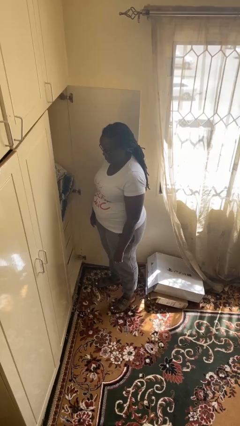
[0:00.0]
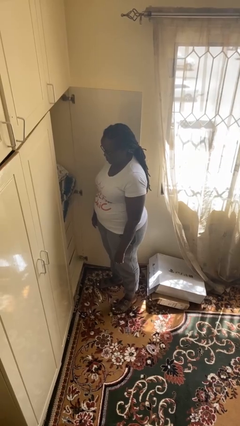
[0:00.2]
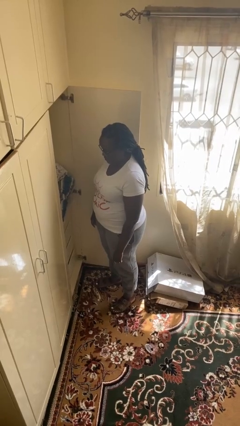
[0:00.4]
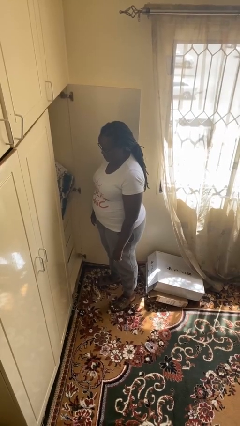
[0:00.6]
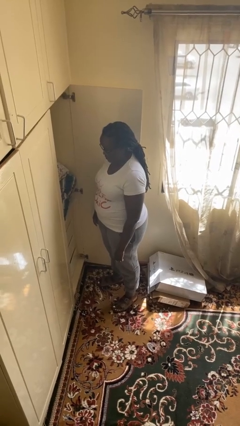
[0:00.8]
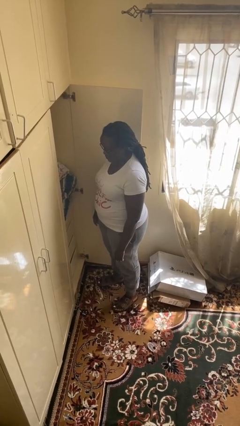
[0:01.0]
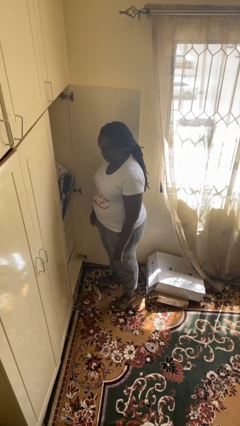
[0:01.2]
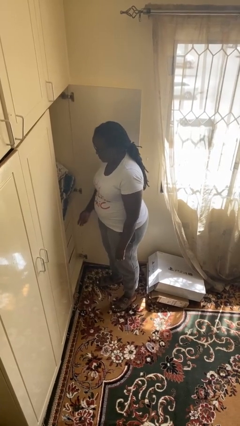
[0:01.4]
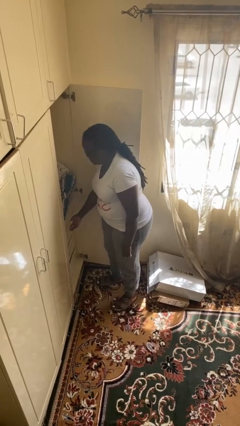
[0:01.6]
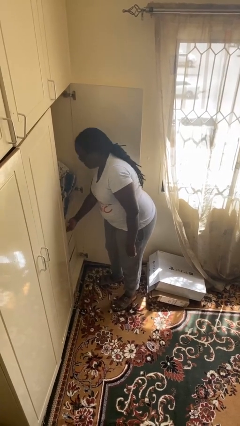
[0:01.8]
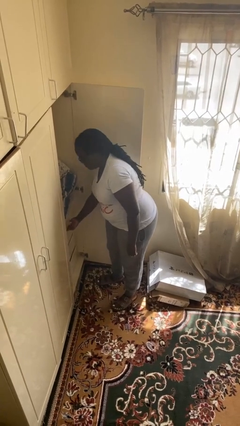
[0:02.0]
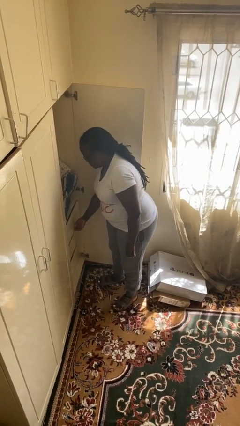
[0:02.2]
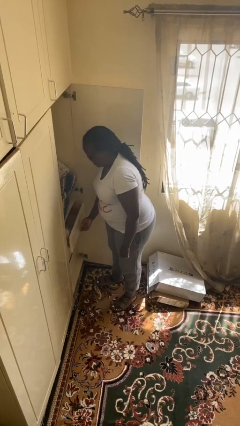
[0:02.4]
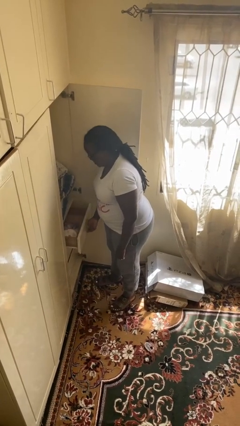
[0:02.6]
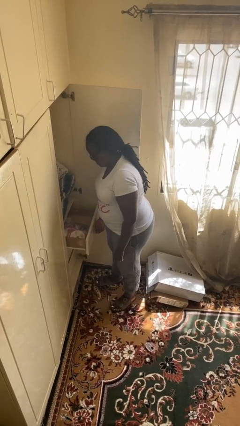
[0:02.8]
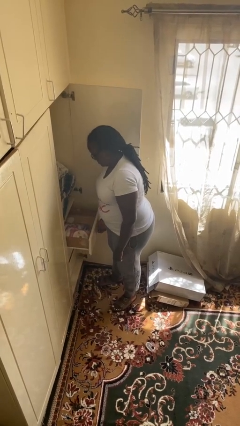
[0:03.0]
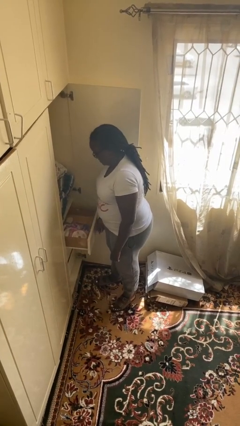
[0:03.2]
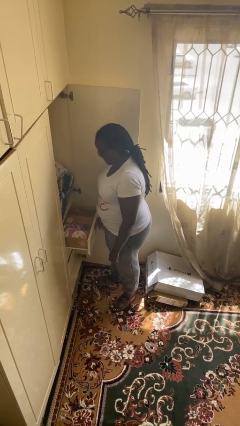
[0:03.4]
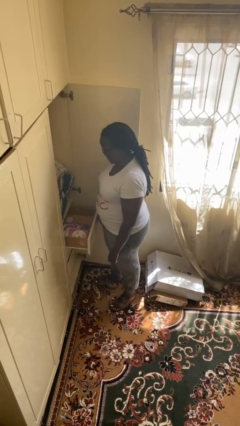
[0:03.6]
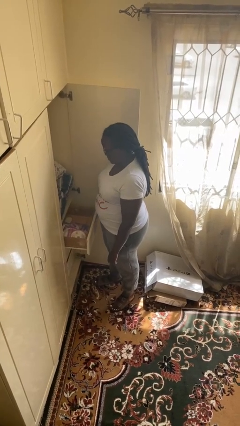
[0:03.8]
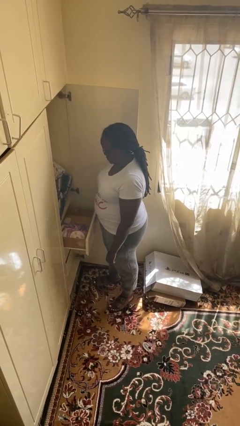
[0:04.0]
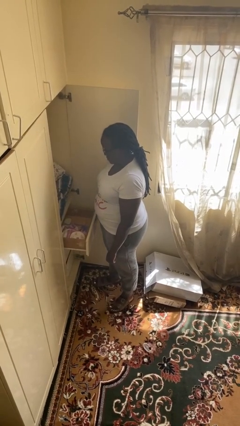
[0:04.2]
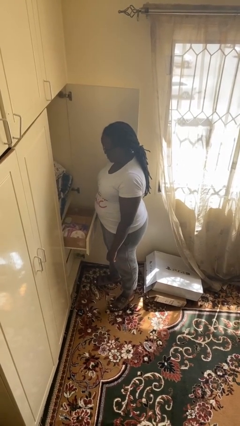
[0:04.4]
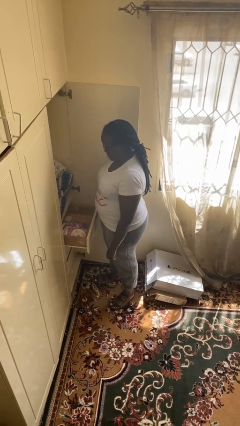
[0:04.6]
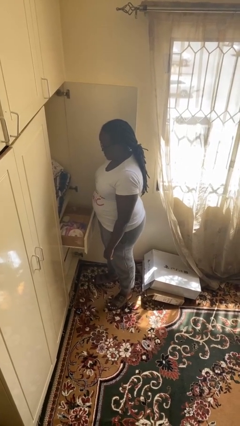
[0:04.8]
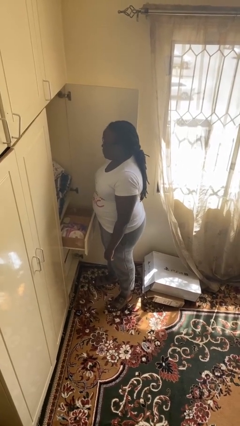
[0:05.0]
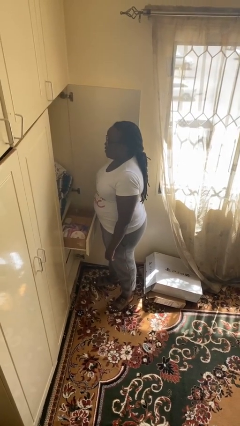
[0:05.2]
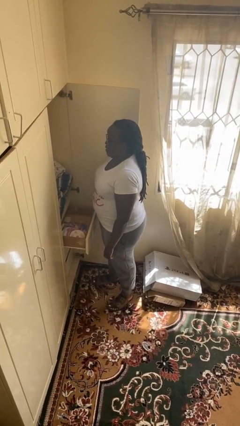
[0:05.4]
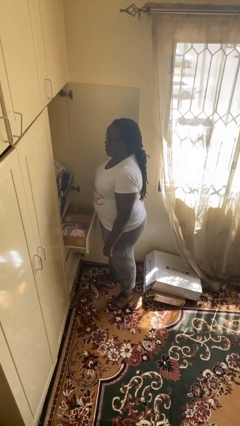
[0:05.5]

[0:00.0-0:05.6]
person opens dresser drawer

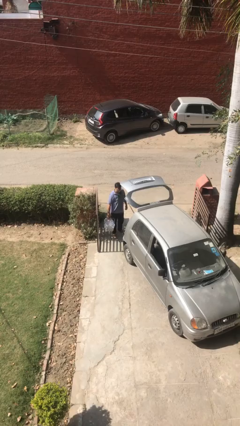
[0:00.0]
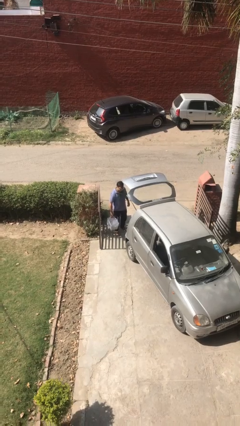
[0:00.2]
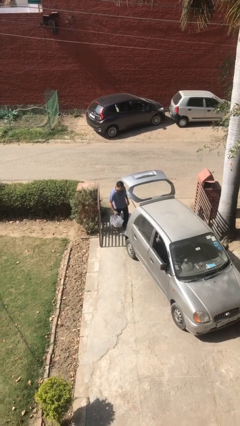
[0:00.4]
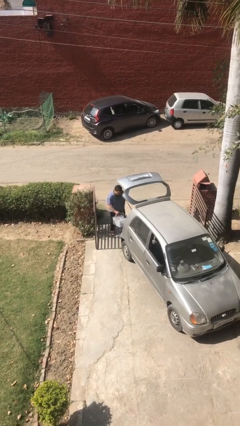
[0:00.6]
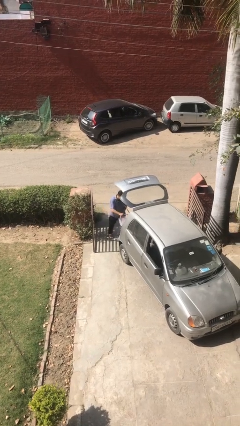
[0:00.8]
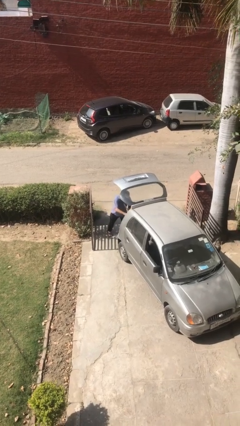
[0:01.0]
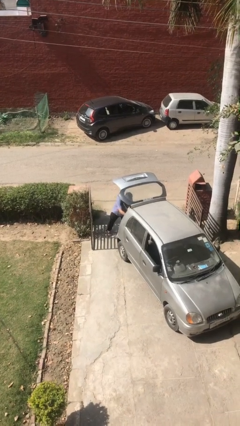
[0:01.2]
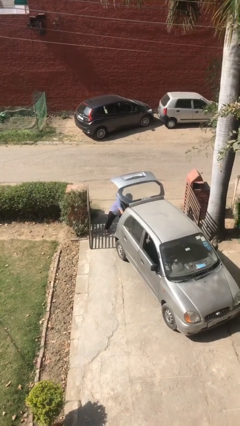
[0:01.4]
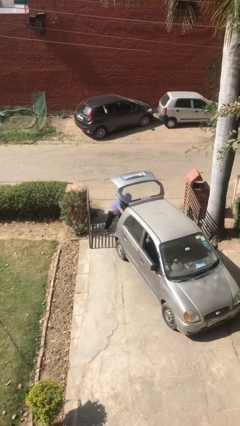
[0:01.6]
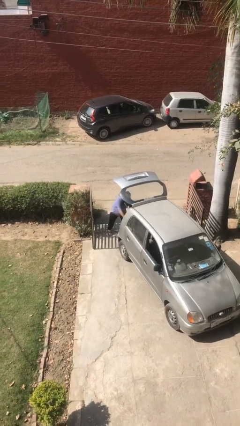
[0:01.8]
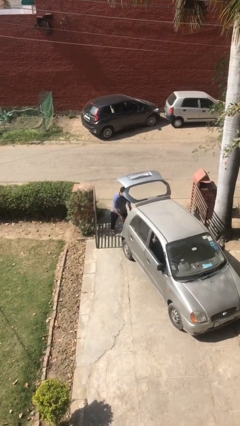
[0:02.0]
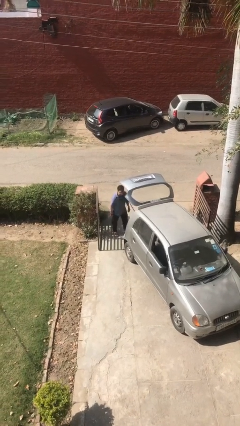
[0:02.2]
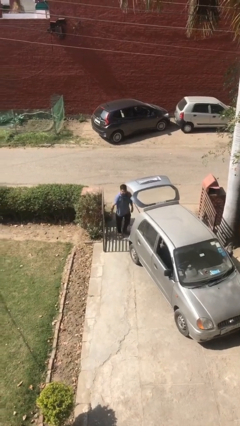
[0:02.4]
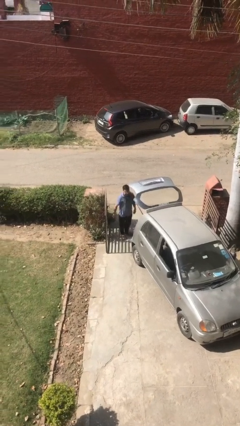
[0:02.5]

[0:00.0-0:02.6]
person loads car

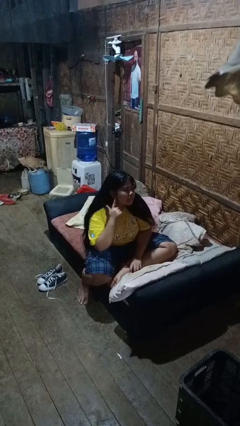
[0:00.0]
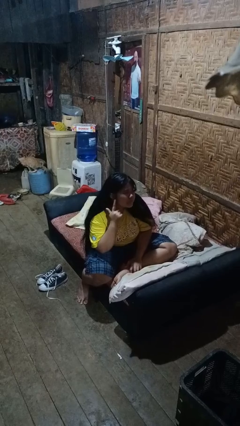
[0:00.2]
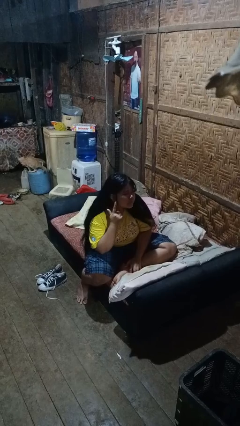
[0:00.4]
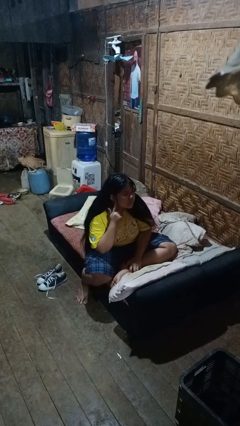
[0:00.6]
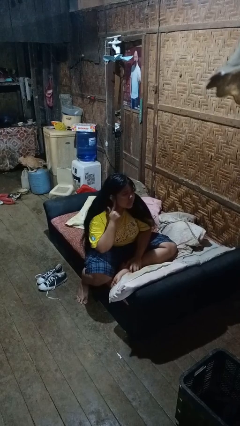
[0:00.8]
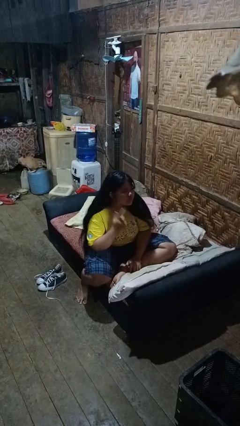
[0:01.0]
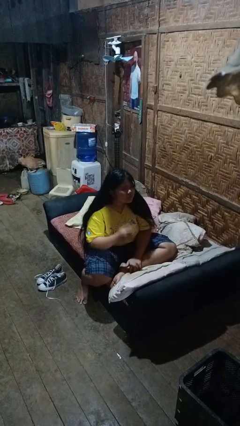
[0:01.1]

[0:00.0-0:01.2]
person gestures listen closely

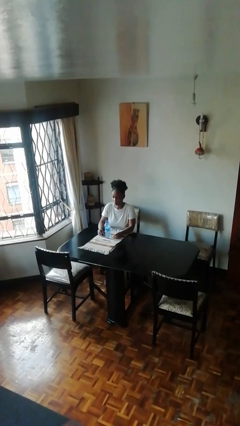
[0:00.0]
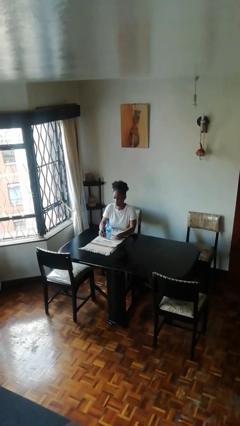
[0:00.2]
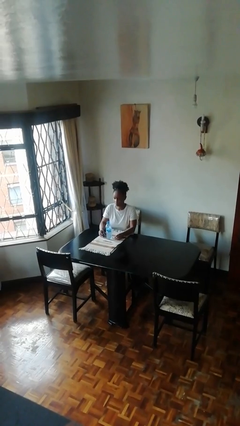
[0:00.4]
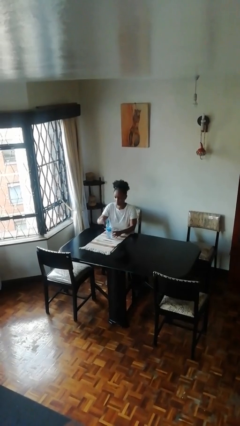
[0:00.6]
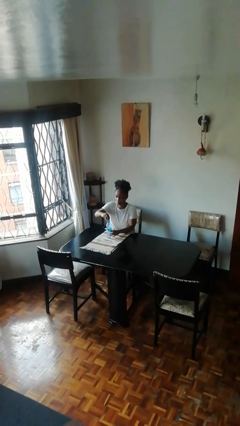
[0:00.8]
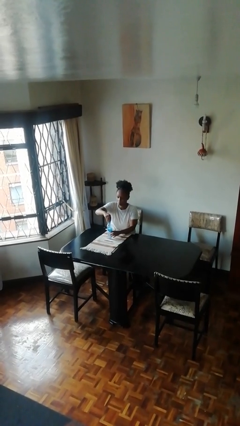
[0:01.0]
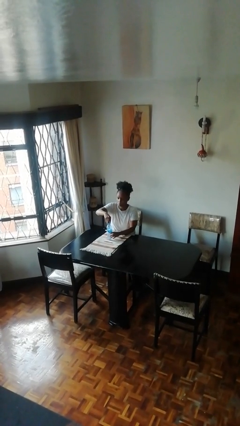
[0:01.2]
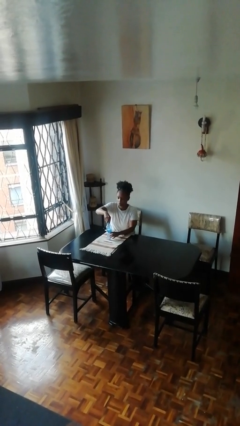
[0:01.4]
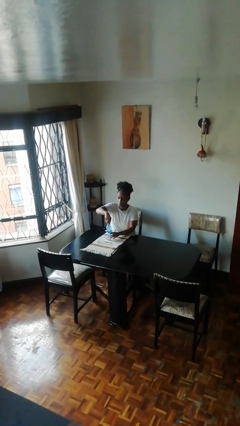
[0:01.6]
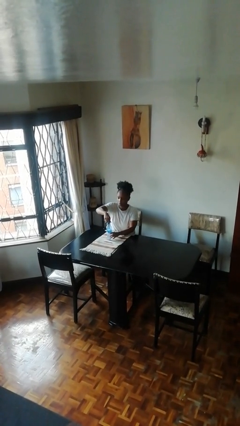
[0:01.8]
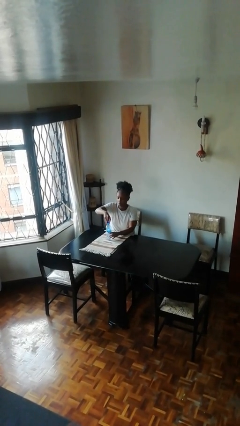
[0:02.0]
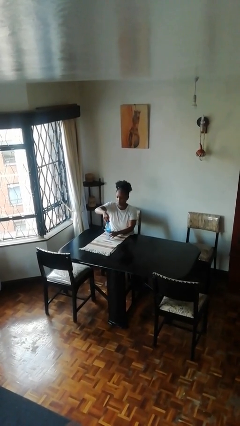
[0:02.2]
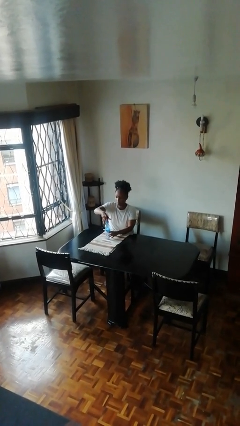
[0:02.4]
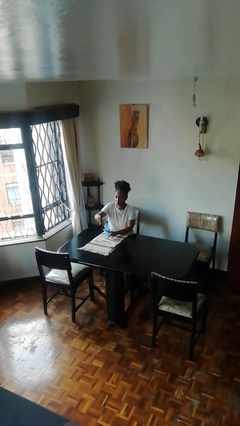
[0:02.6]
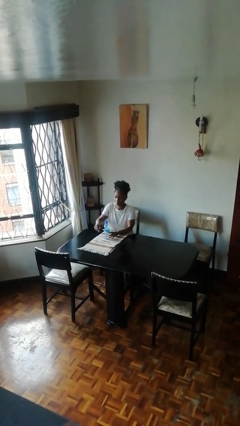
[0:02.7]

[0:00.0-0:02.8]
person screws lid to bottle

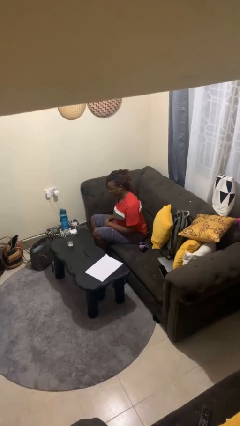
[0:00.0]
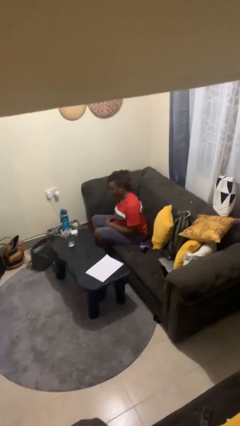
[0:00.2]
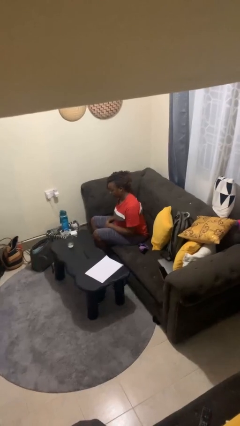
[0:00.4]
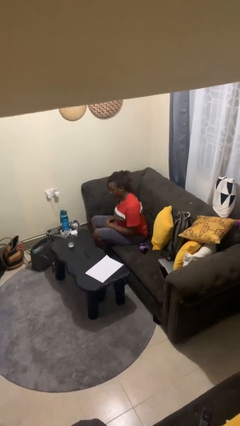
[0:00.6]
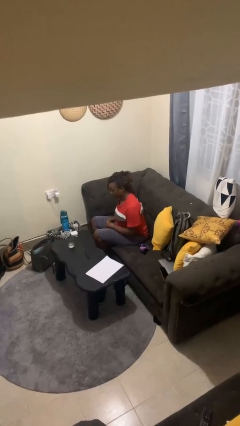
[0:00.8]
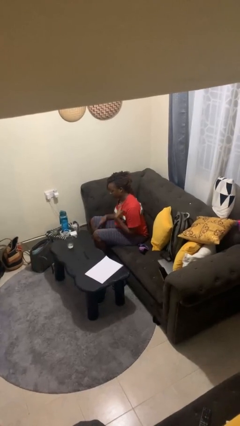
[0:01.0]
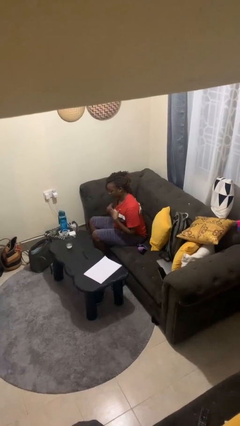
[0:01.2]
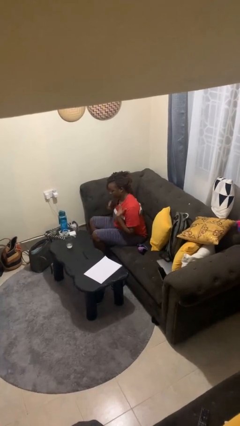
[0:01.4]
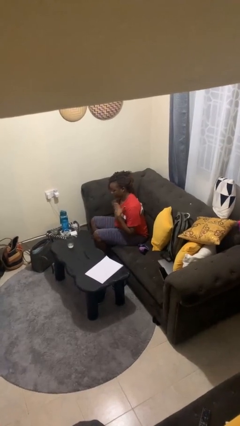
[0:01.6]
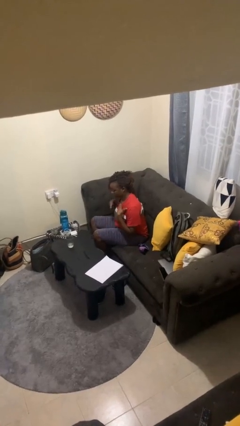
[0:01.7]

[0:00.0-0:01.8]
person drums on chest

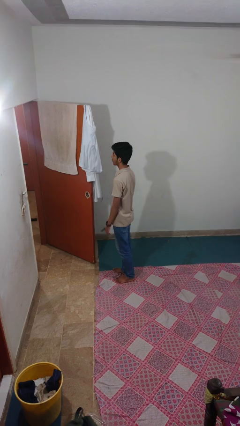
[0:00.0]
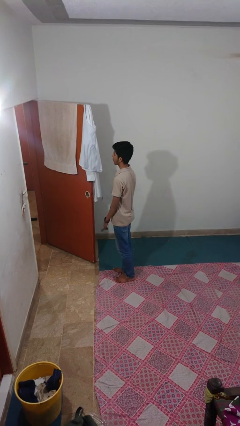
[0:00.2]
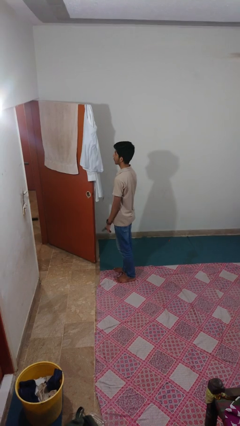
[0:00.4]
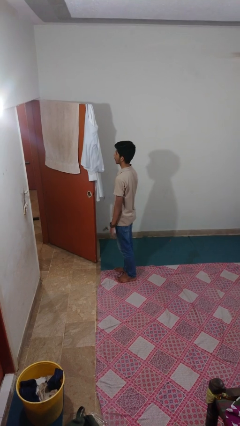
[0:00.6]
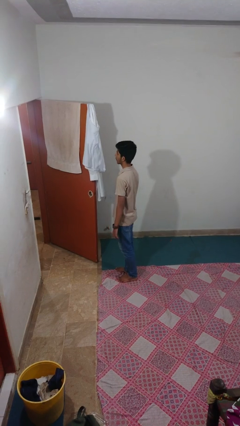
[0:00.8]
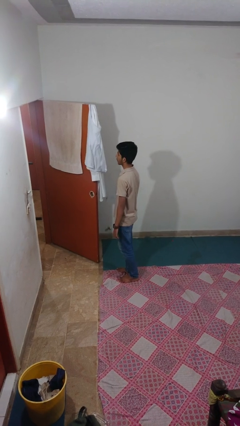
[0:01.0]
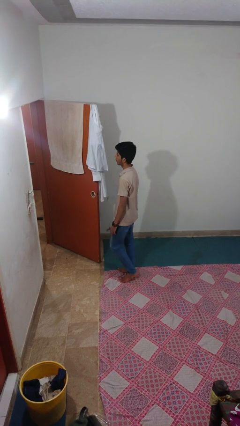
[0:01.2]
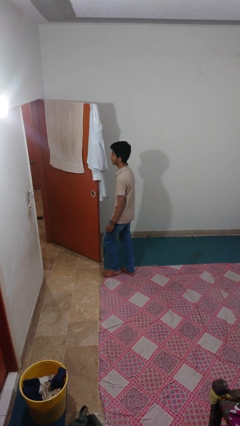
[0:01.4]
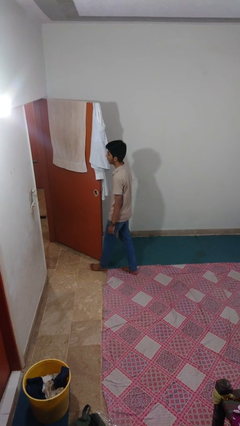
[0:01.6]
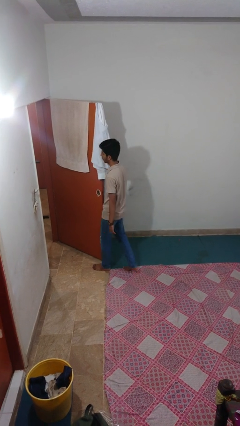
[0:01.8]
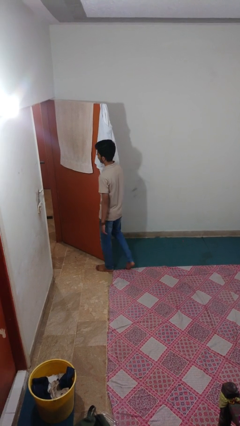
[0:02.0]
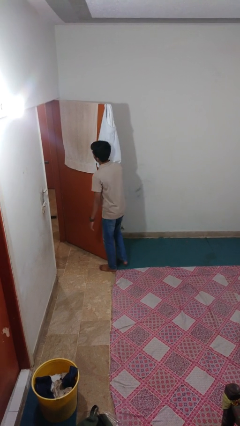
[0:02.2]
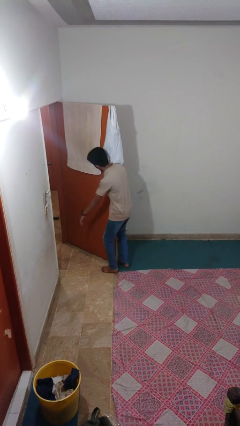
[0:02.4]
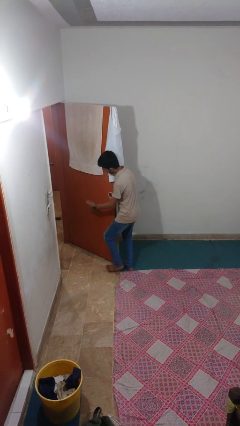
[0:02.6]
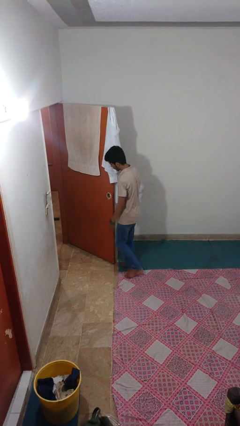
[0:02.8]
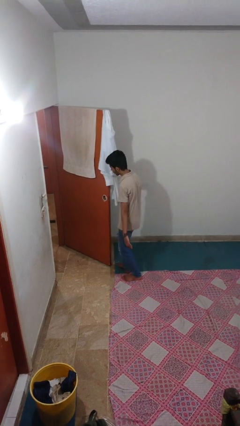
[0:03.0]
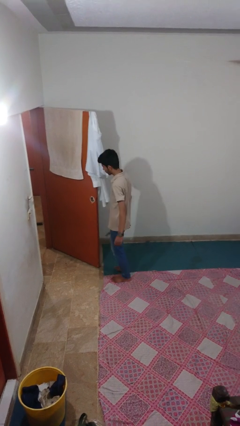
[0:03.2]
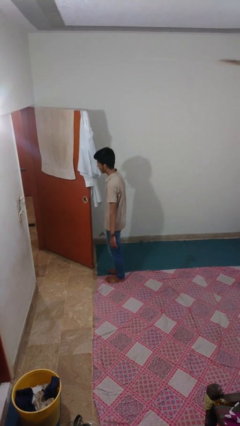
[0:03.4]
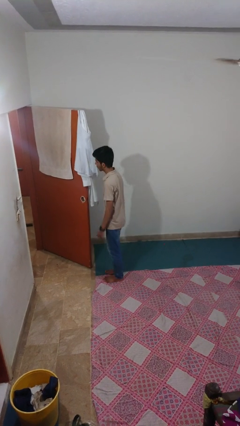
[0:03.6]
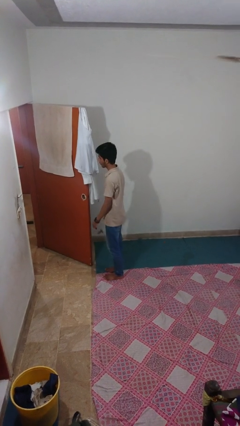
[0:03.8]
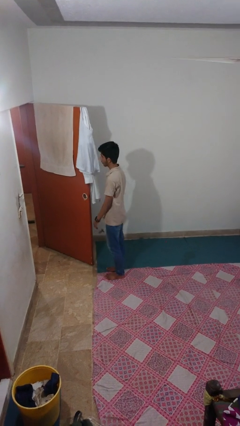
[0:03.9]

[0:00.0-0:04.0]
person bumps into wall
